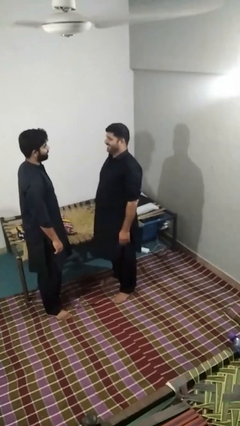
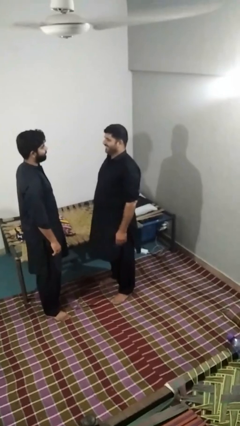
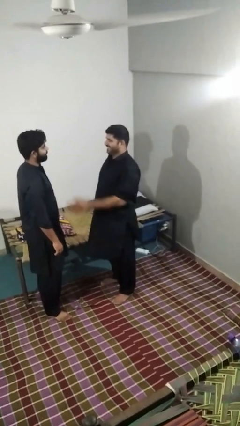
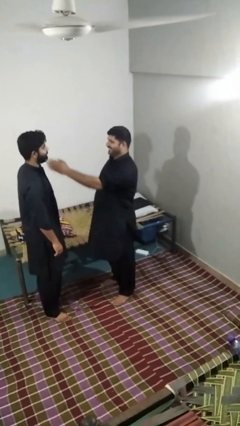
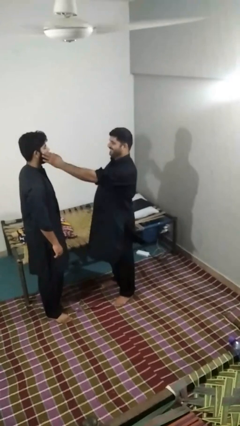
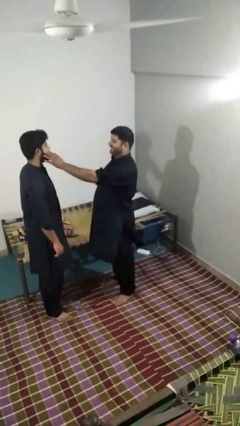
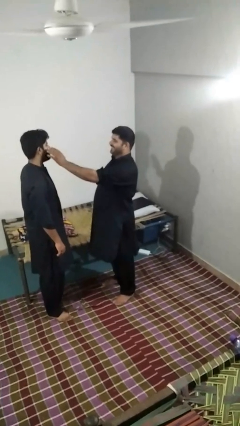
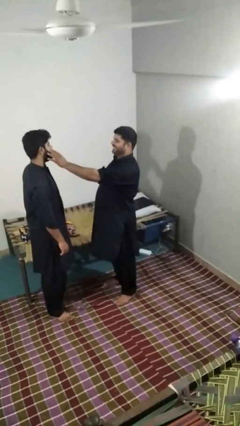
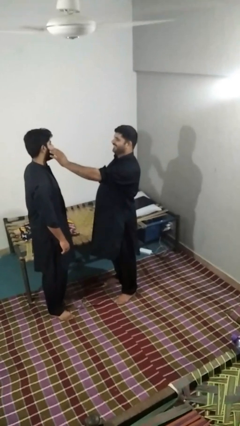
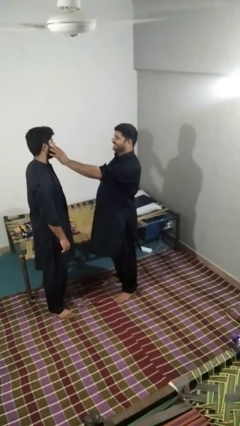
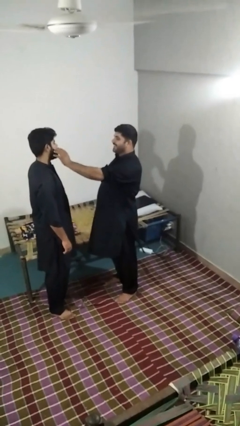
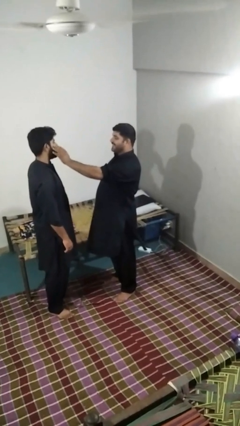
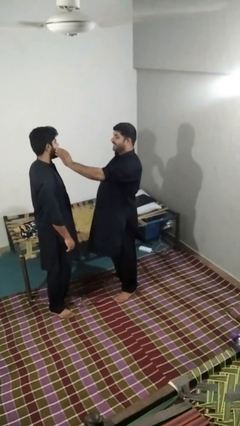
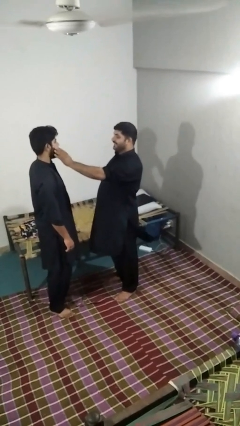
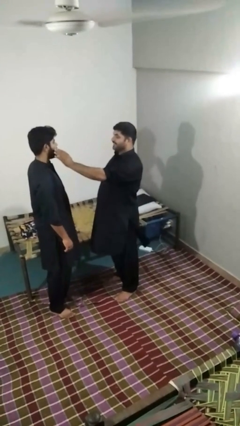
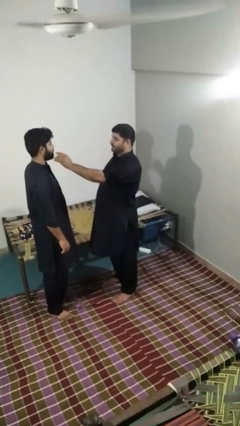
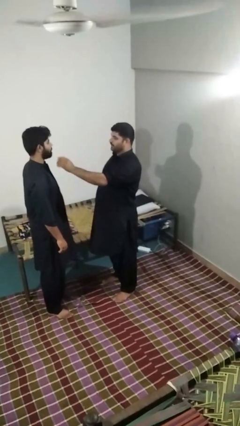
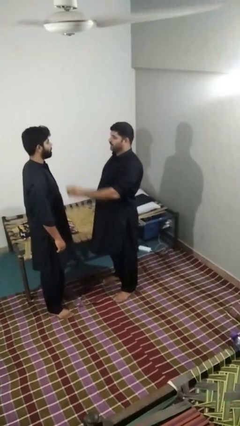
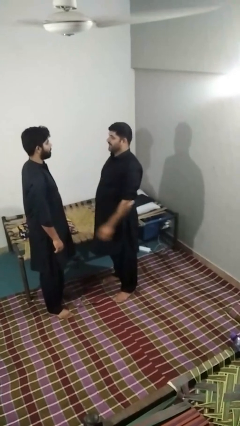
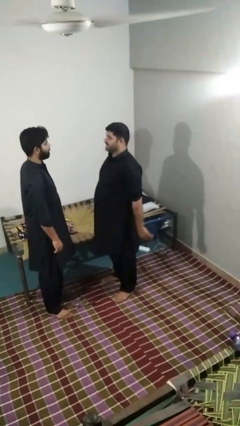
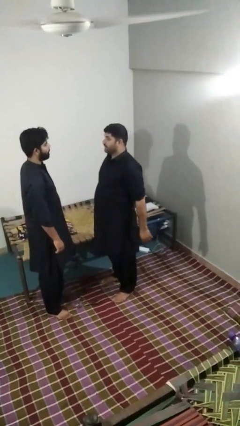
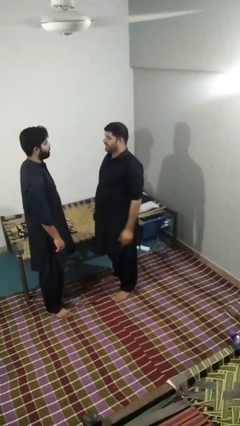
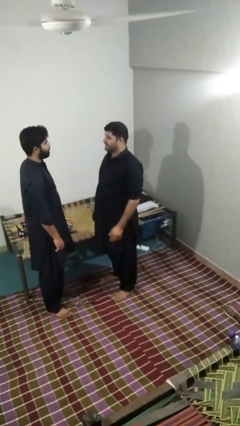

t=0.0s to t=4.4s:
person touches face of person

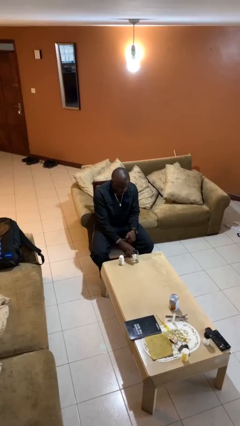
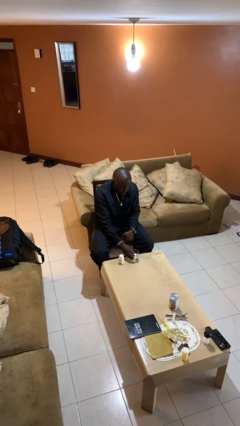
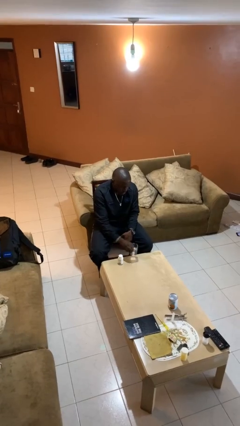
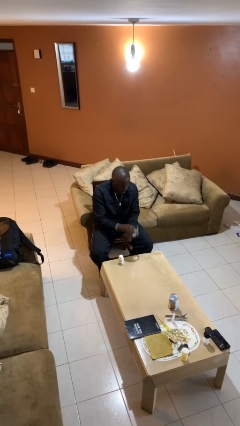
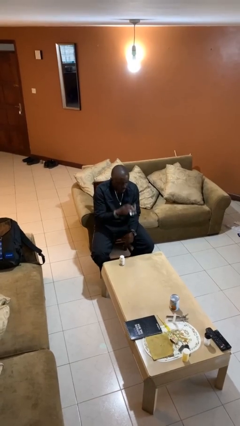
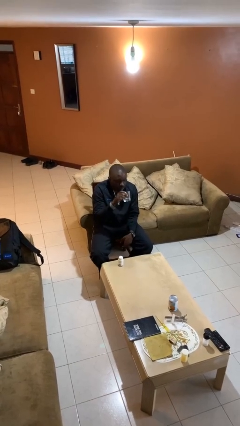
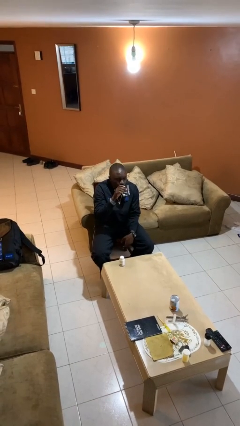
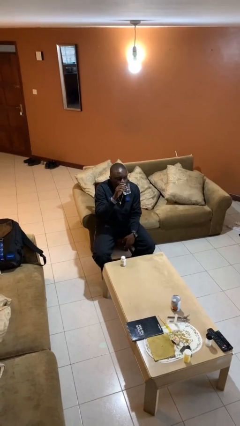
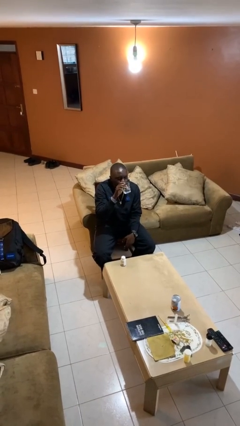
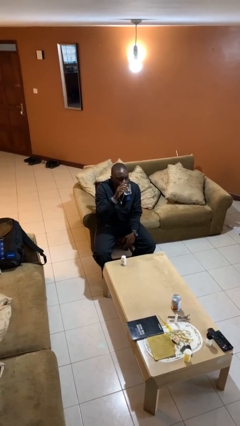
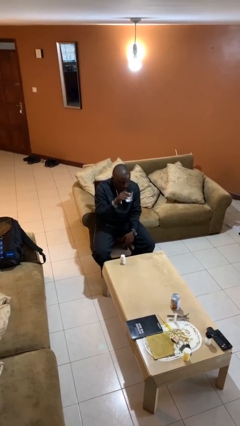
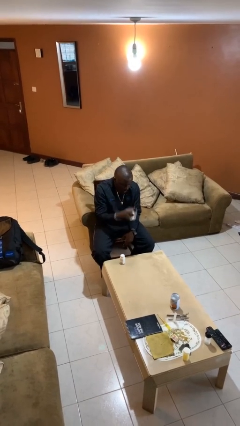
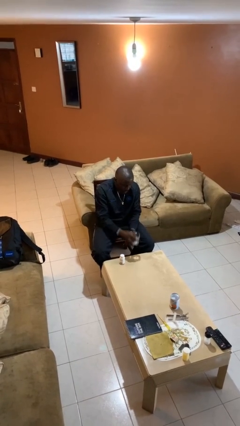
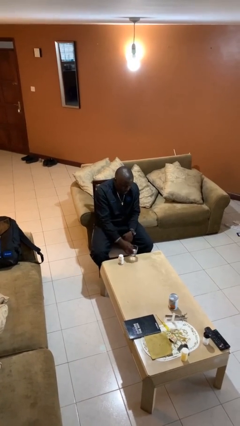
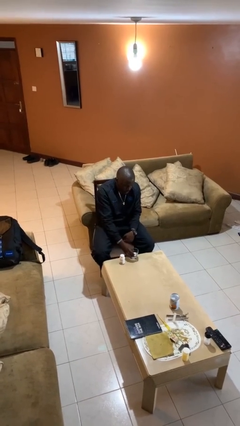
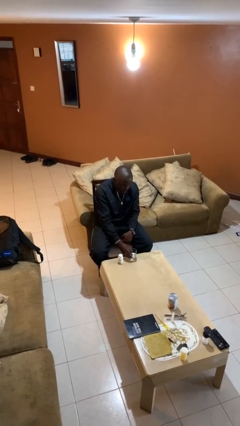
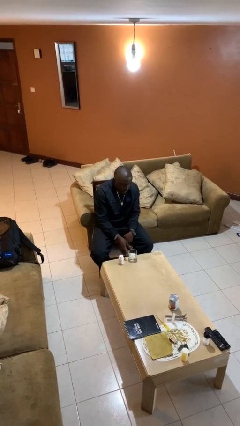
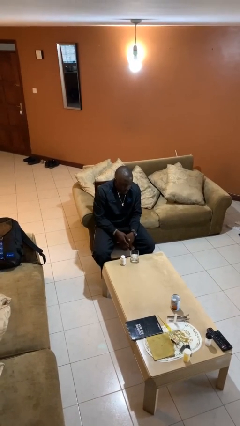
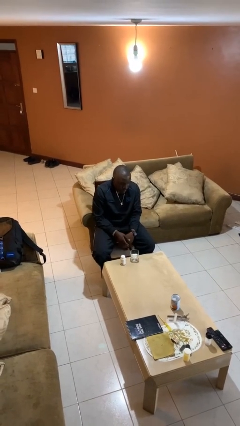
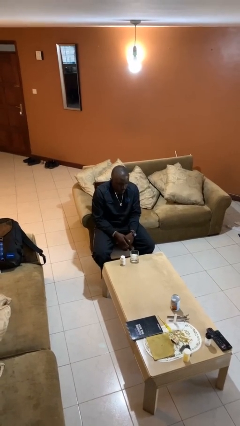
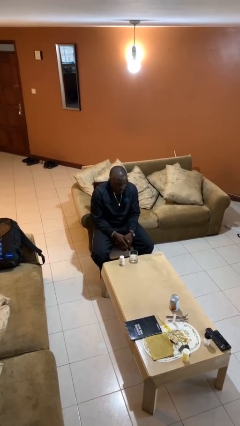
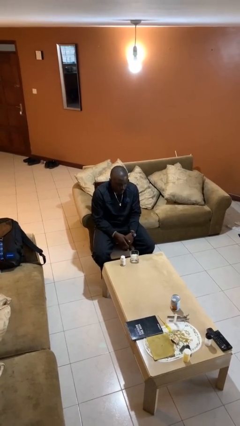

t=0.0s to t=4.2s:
person drinks from cup

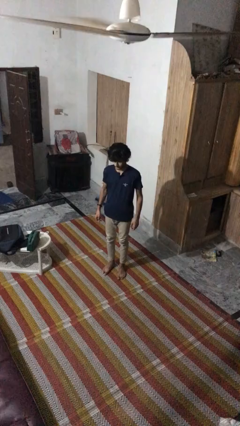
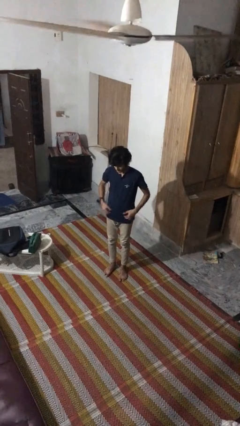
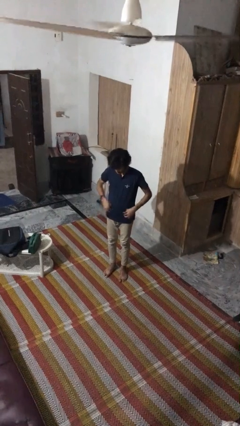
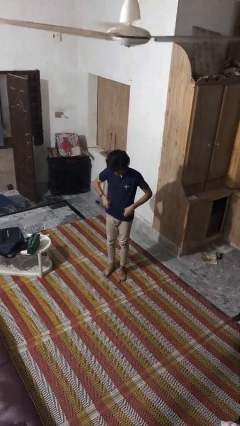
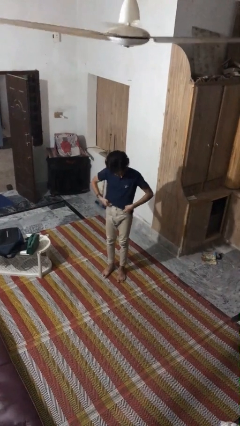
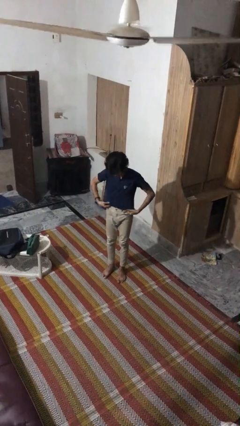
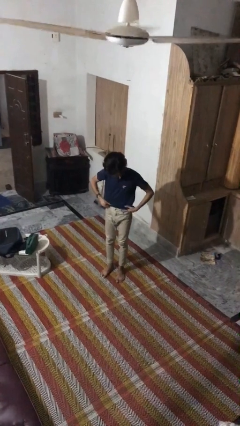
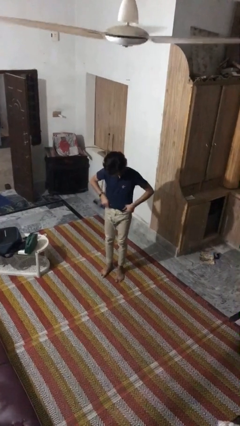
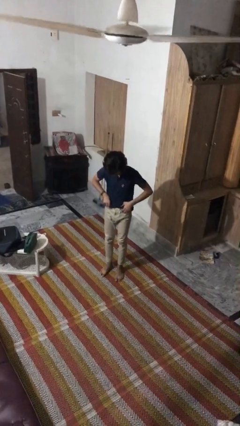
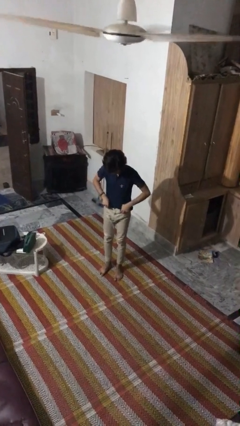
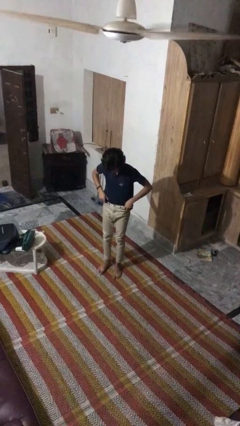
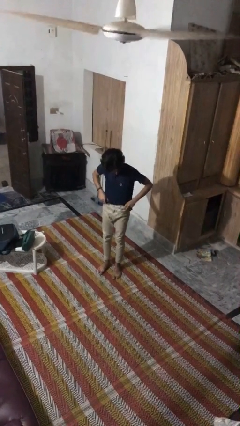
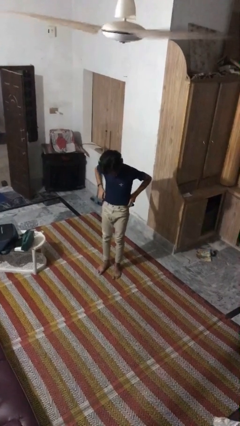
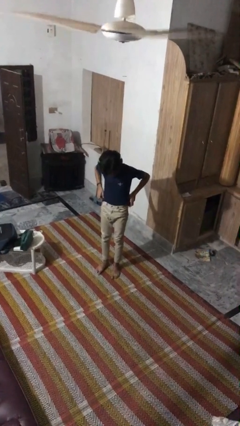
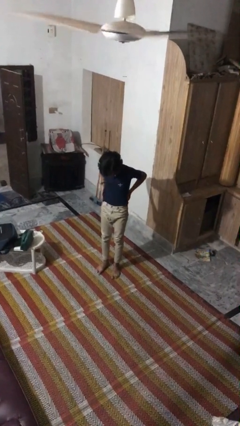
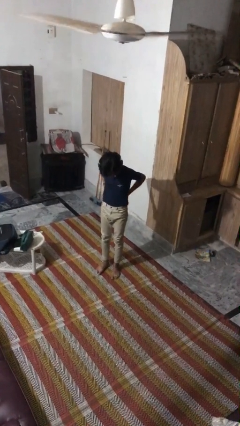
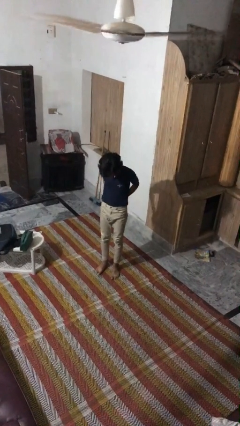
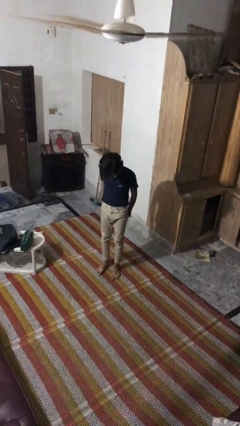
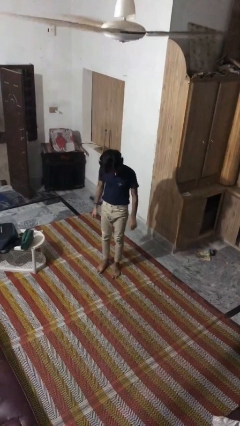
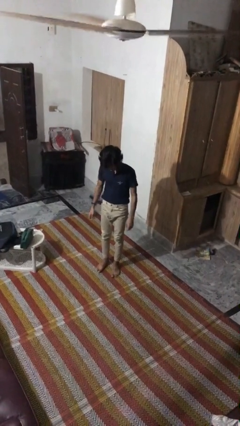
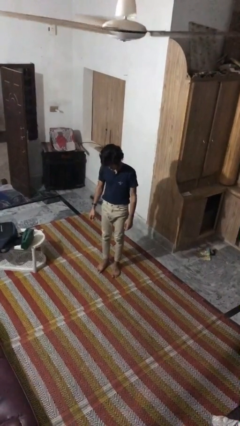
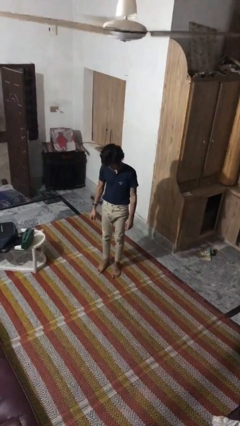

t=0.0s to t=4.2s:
person tucks in shirt

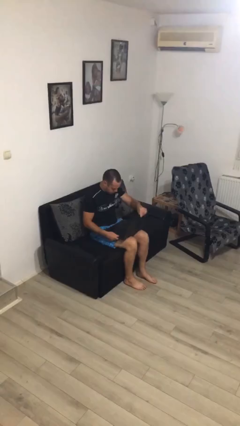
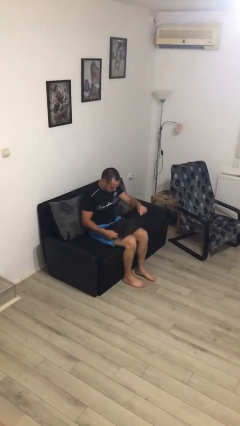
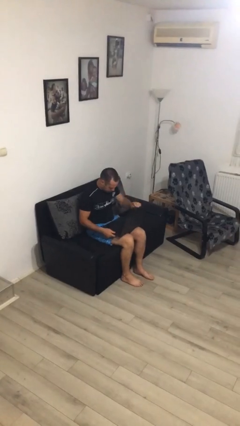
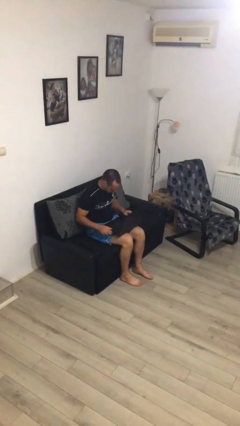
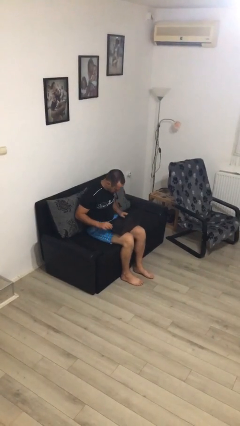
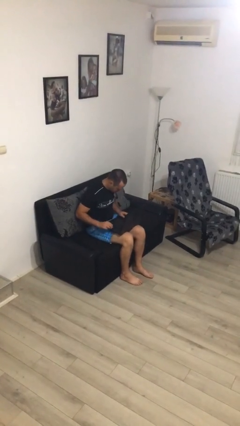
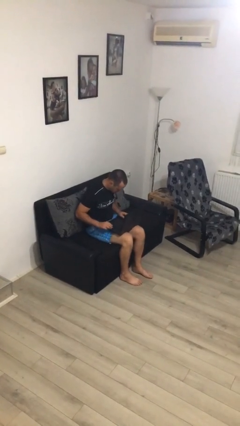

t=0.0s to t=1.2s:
person interacts with laptop

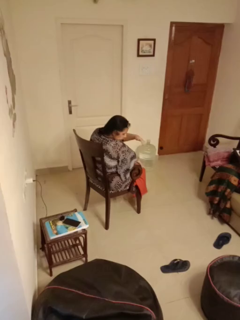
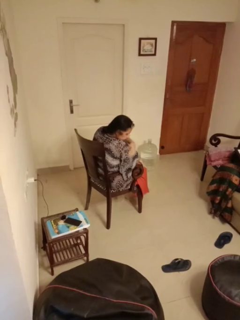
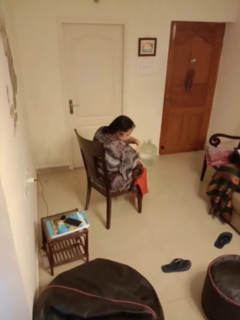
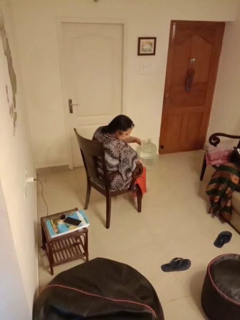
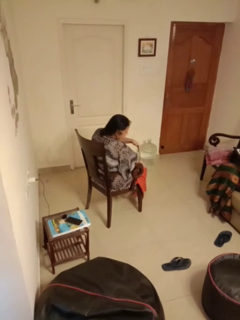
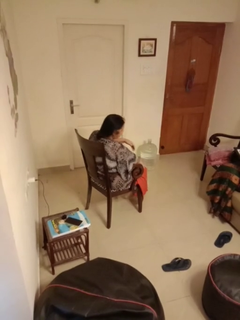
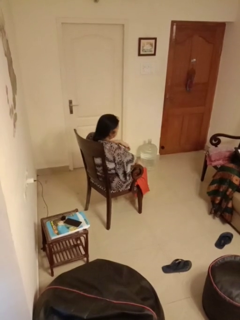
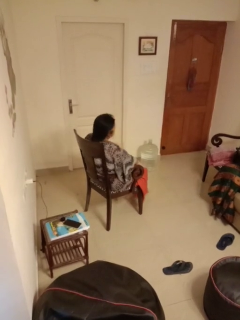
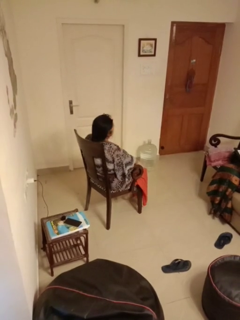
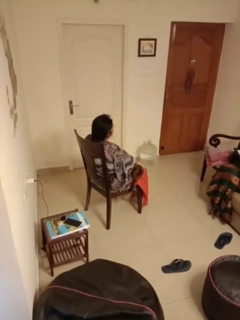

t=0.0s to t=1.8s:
person swats bug

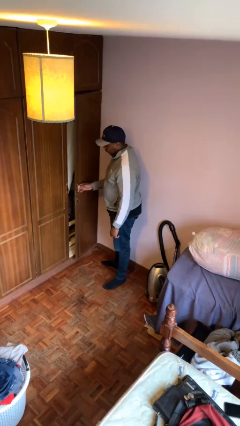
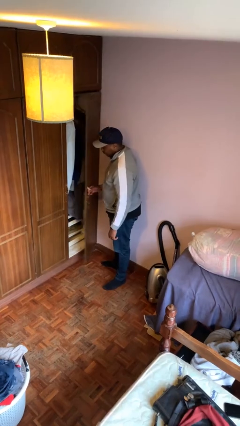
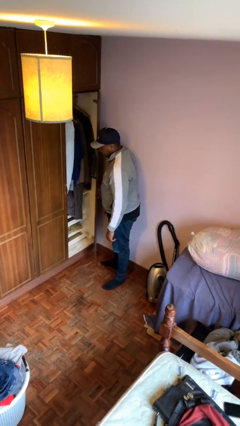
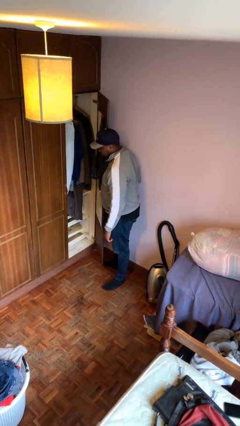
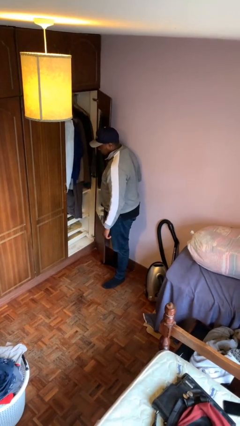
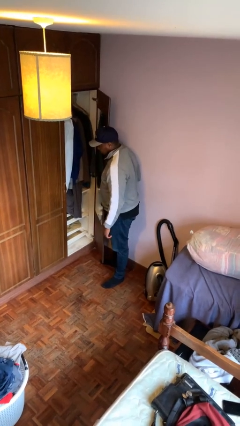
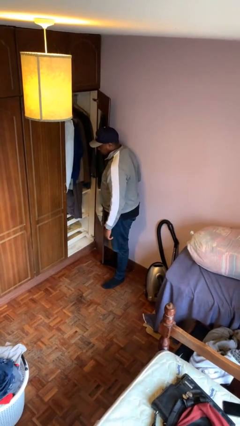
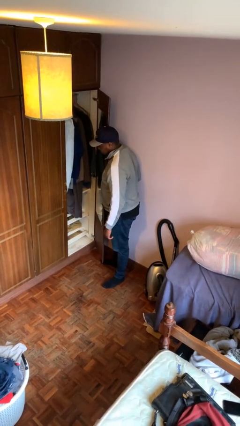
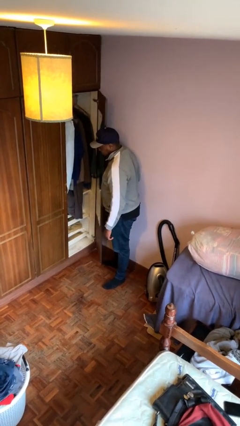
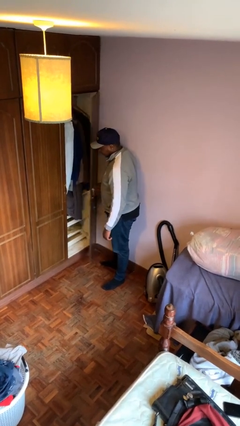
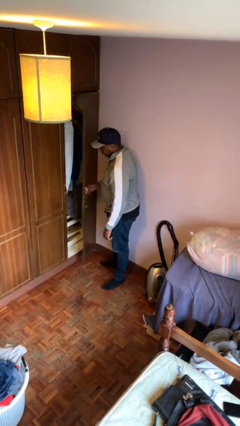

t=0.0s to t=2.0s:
person opens closet door
